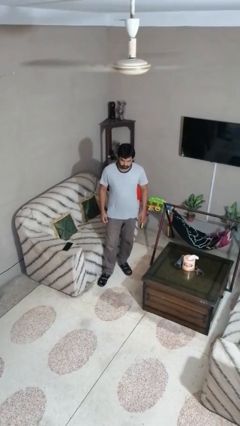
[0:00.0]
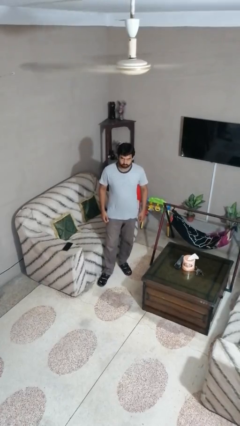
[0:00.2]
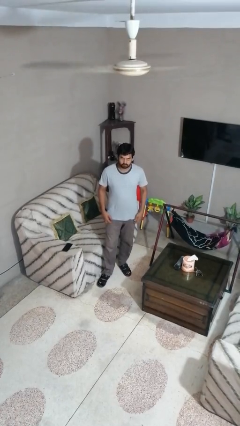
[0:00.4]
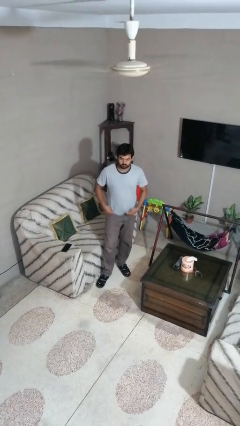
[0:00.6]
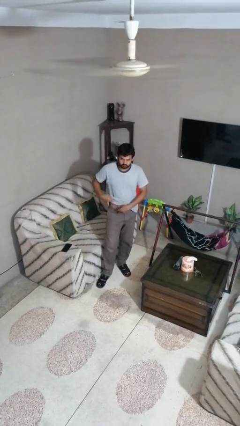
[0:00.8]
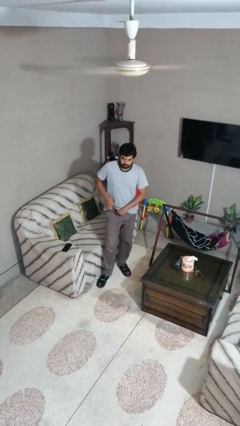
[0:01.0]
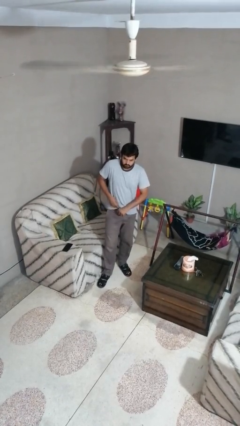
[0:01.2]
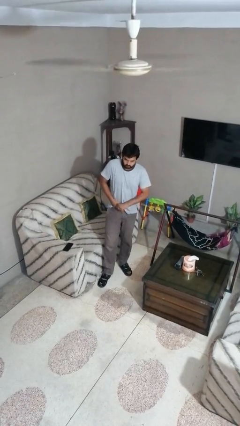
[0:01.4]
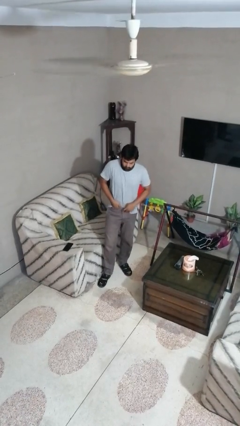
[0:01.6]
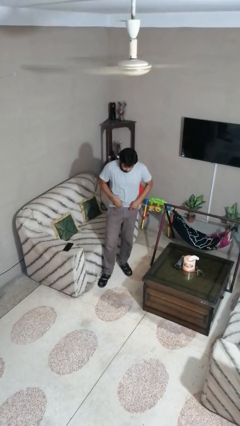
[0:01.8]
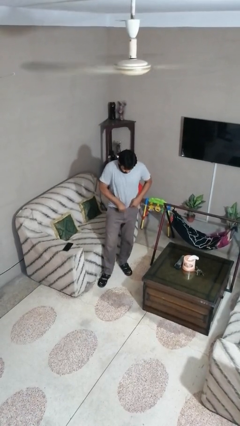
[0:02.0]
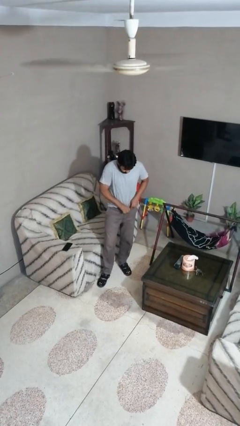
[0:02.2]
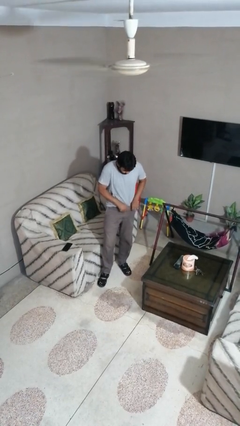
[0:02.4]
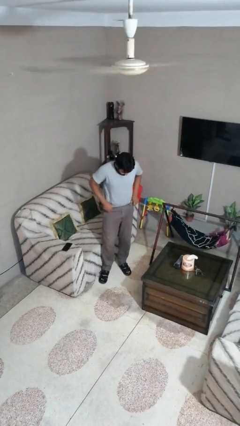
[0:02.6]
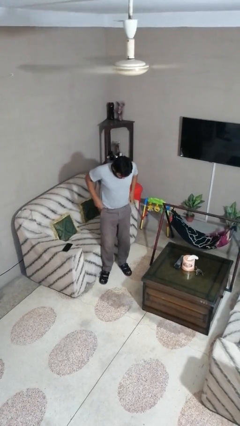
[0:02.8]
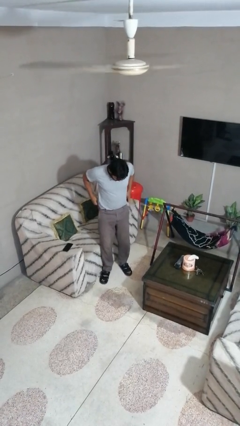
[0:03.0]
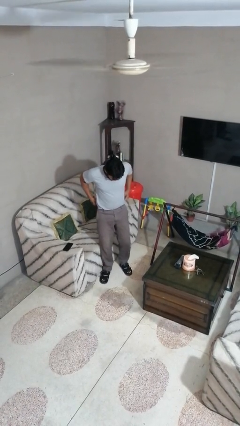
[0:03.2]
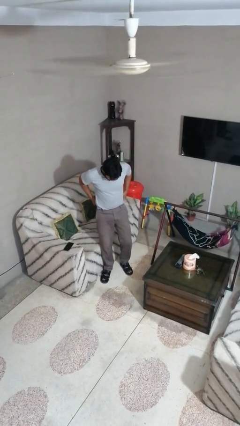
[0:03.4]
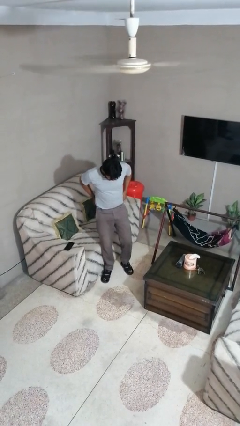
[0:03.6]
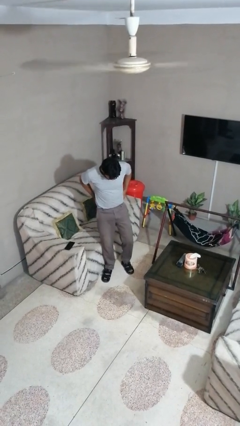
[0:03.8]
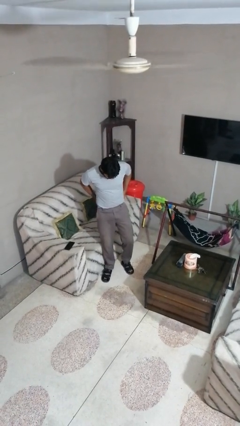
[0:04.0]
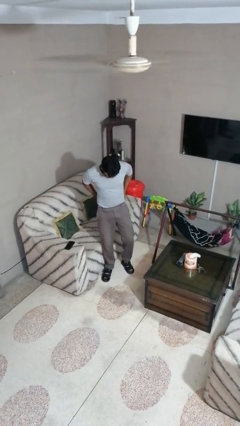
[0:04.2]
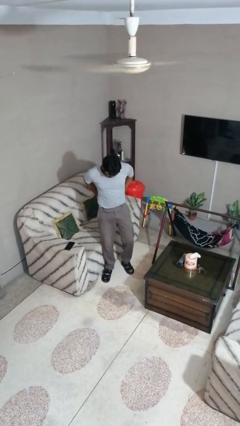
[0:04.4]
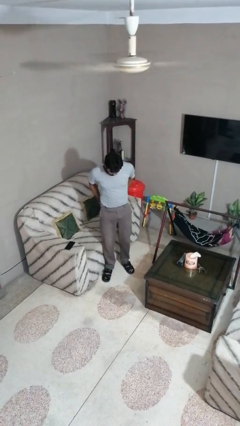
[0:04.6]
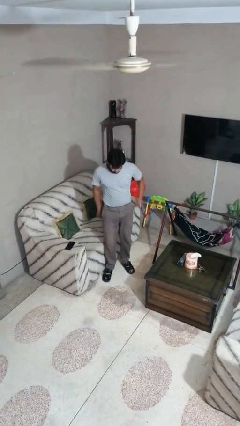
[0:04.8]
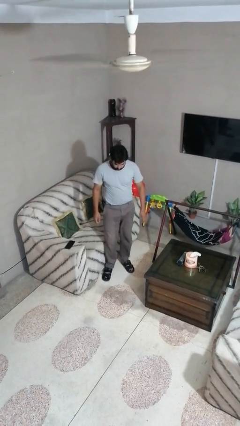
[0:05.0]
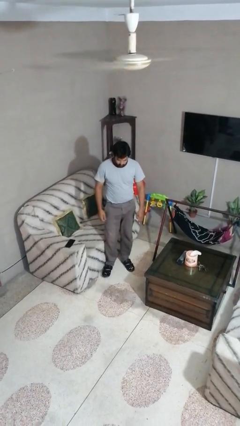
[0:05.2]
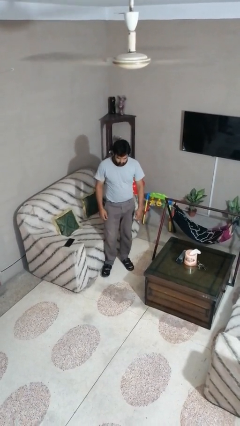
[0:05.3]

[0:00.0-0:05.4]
person tucks in shirt

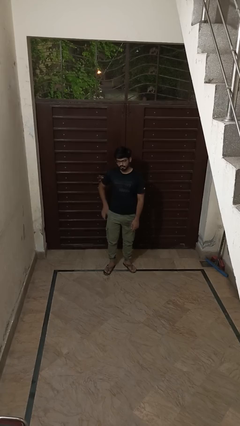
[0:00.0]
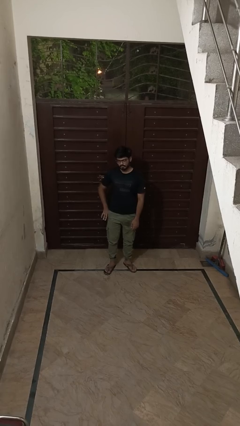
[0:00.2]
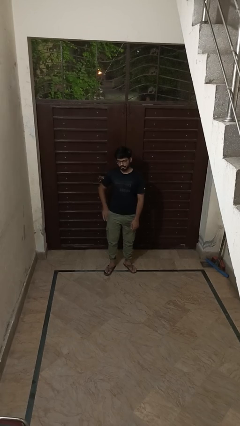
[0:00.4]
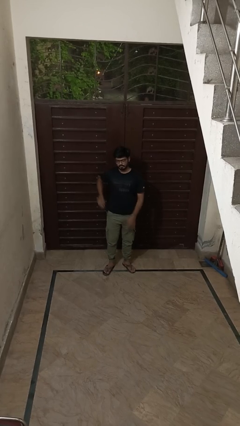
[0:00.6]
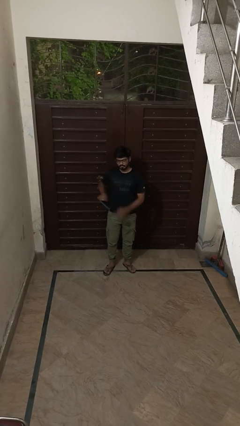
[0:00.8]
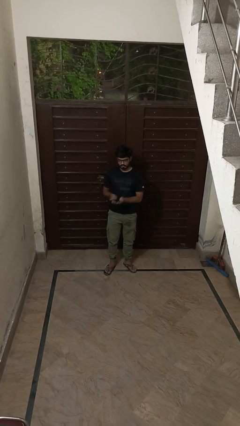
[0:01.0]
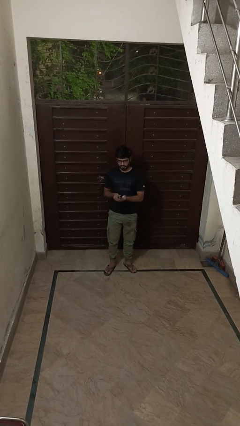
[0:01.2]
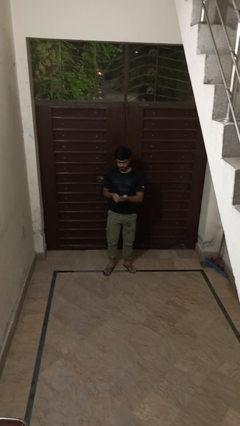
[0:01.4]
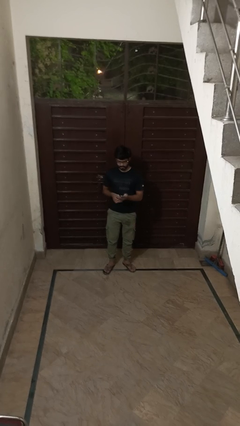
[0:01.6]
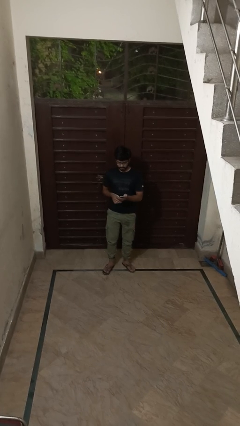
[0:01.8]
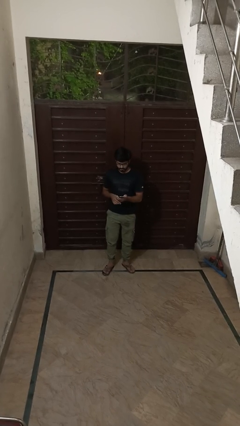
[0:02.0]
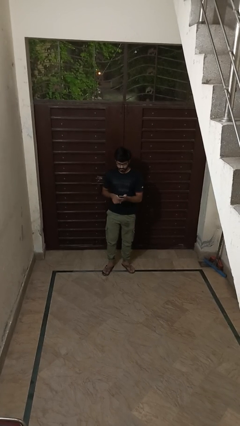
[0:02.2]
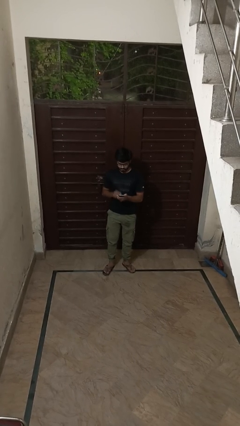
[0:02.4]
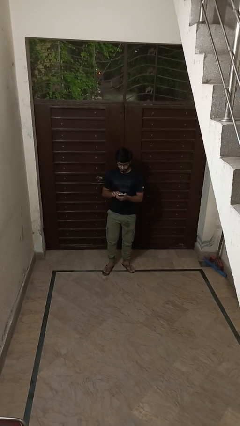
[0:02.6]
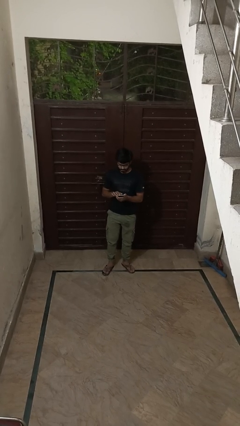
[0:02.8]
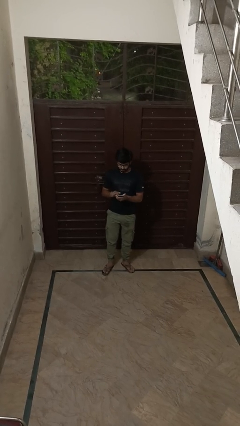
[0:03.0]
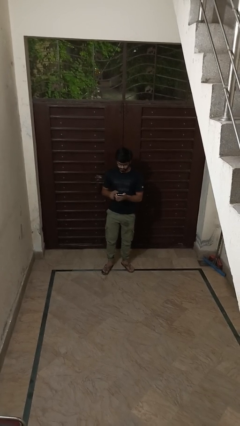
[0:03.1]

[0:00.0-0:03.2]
person takes phone from pocket

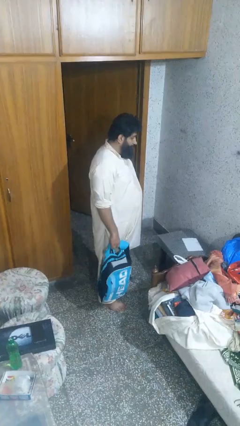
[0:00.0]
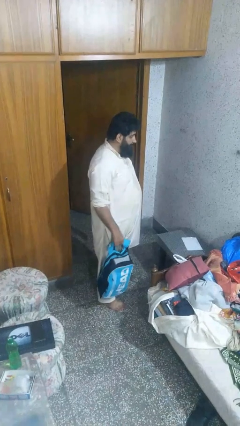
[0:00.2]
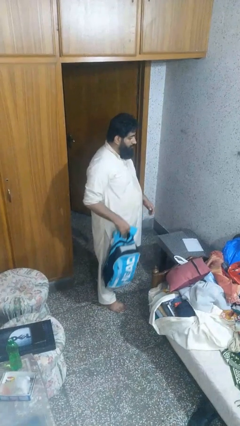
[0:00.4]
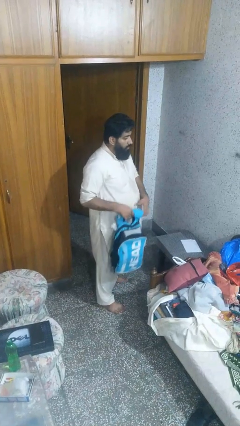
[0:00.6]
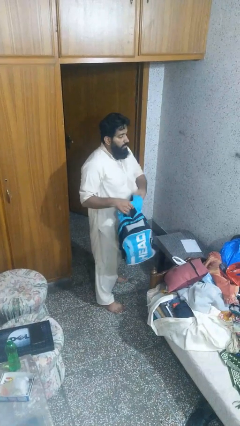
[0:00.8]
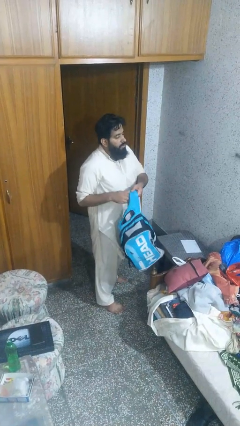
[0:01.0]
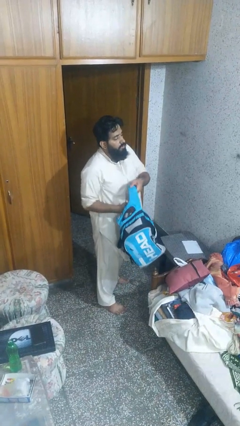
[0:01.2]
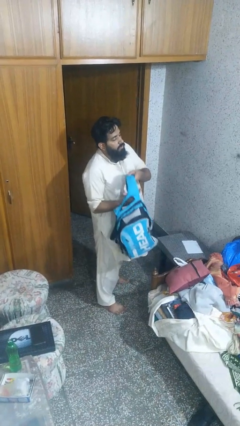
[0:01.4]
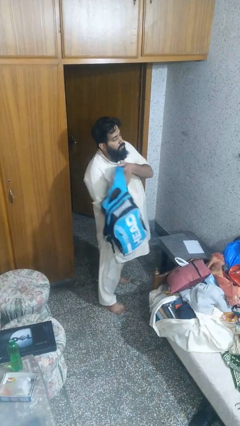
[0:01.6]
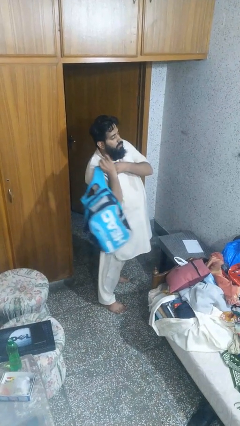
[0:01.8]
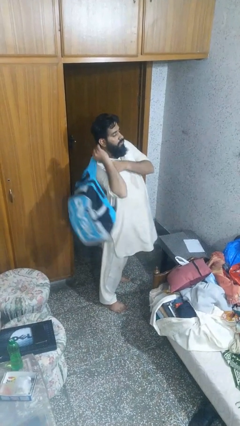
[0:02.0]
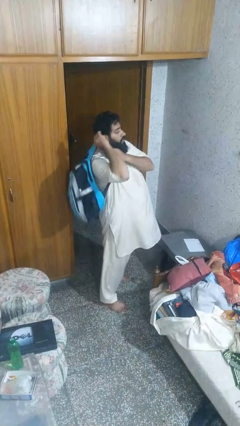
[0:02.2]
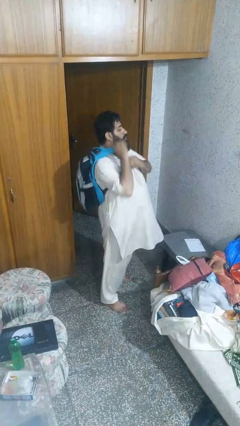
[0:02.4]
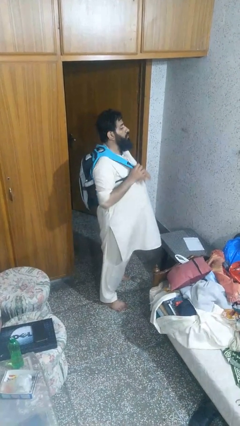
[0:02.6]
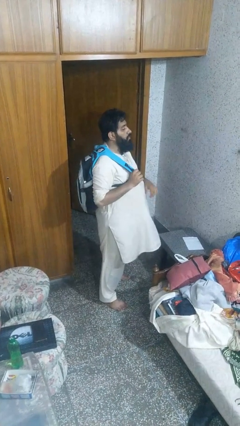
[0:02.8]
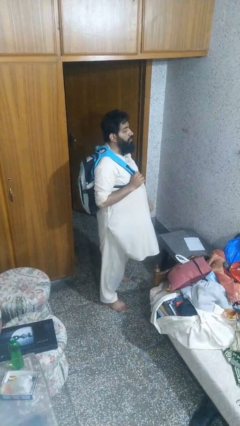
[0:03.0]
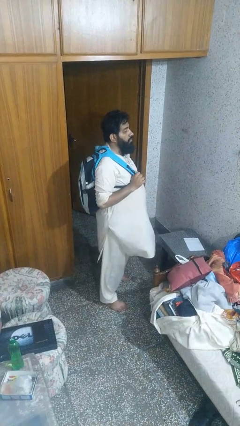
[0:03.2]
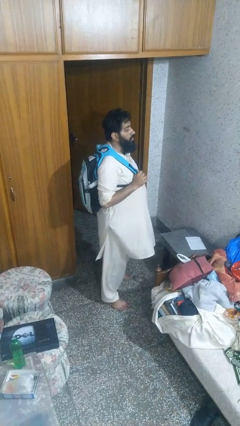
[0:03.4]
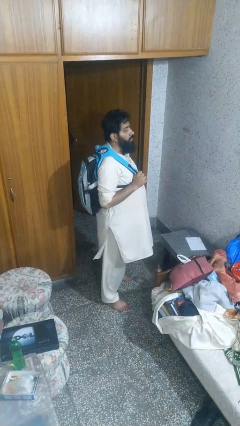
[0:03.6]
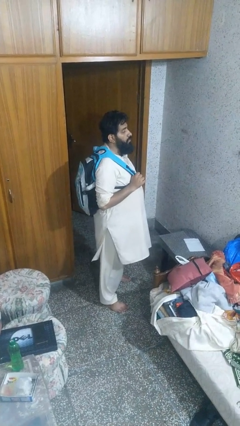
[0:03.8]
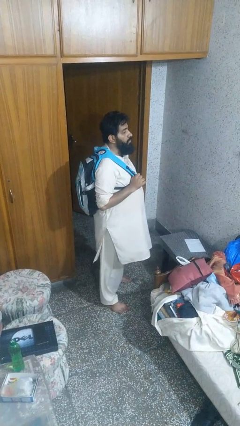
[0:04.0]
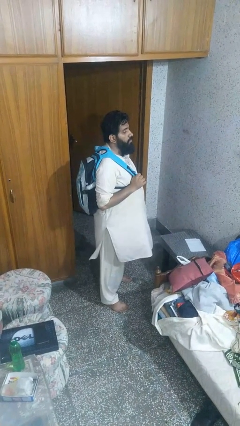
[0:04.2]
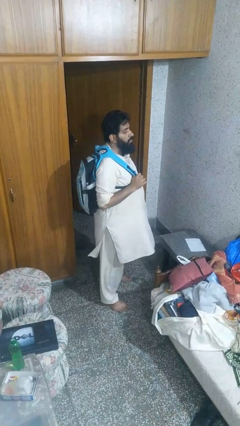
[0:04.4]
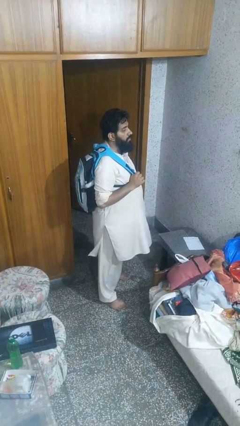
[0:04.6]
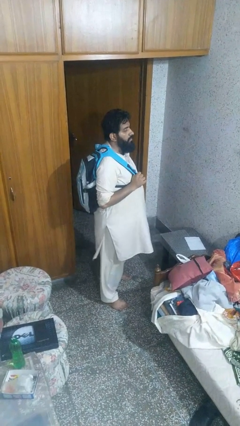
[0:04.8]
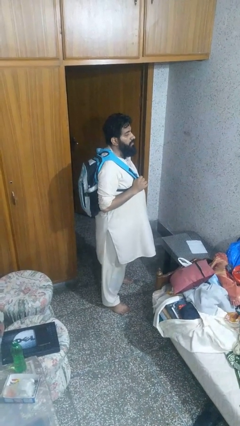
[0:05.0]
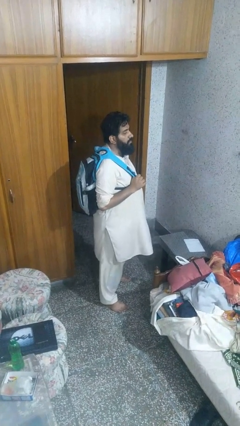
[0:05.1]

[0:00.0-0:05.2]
person puts on backpack

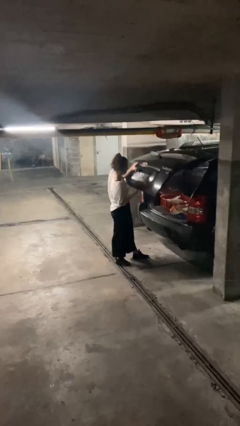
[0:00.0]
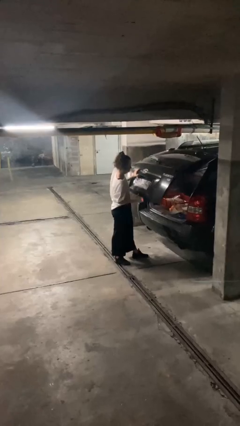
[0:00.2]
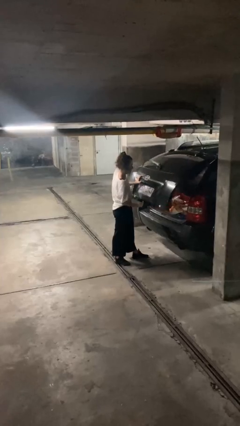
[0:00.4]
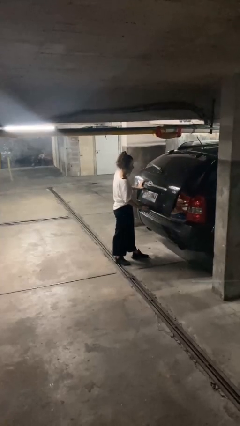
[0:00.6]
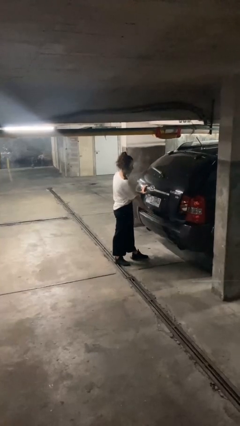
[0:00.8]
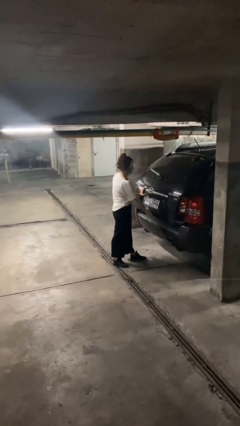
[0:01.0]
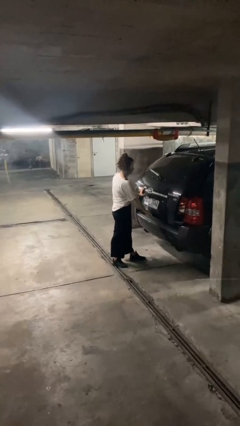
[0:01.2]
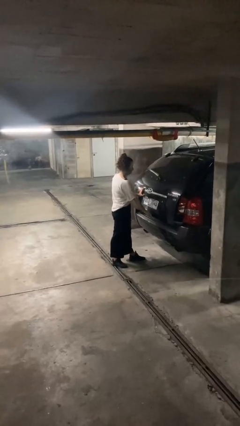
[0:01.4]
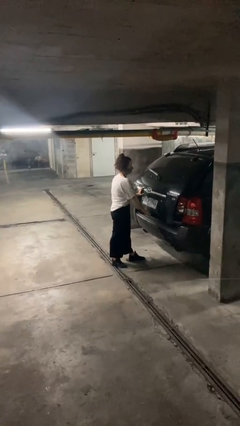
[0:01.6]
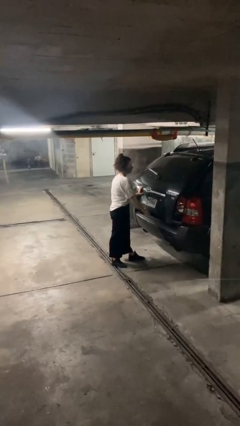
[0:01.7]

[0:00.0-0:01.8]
person closes car trunk

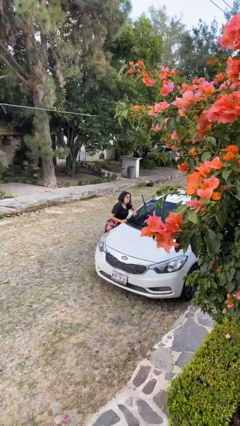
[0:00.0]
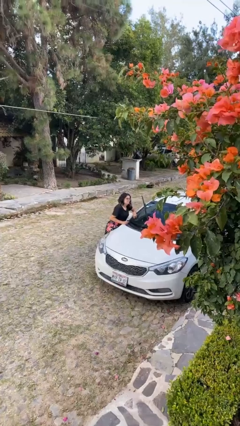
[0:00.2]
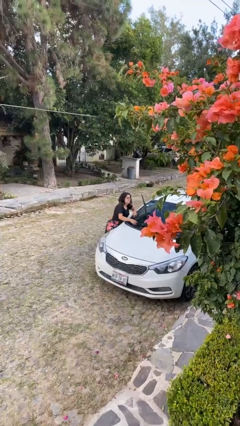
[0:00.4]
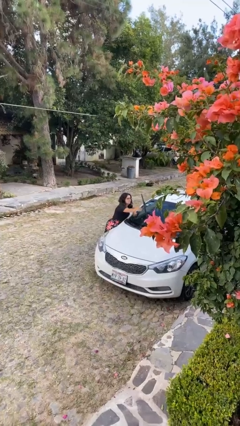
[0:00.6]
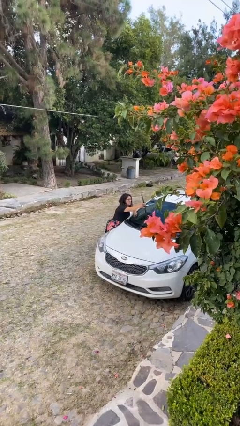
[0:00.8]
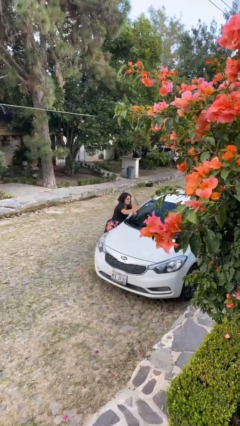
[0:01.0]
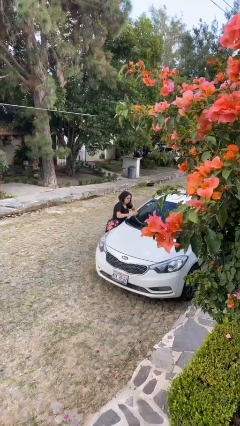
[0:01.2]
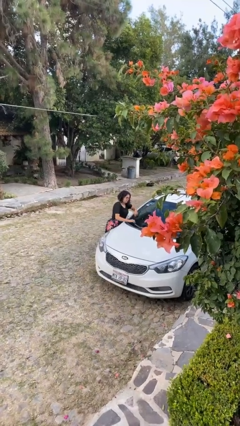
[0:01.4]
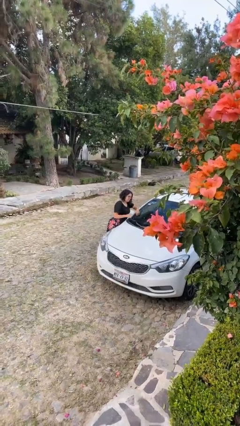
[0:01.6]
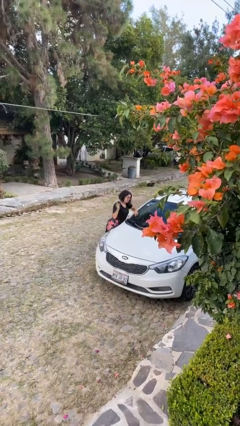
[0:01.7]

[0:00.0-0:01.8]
person flips down car wipers

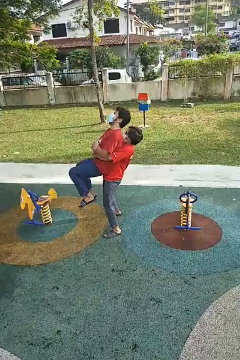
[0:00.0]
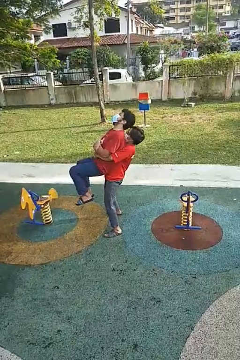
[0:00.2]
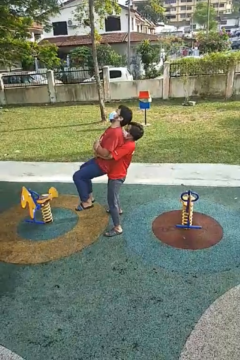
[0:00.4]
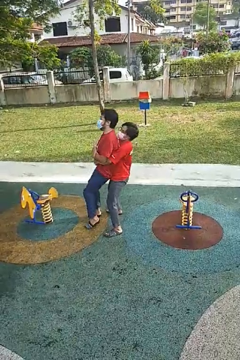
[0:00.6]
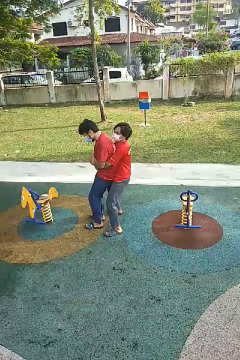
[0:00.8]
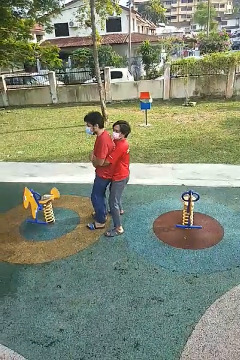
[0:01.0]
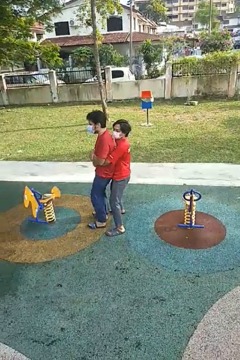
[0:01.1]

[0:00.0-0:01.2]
person puts down person
